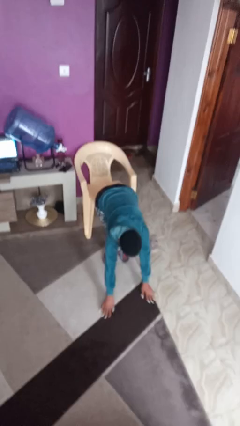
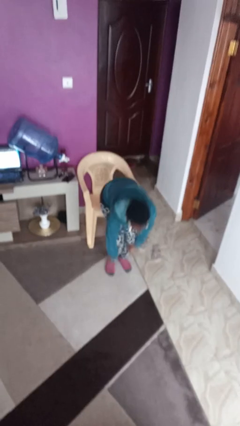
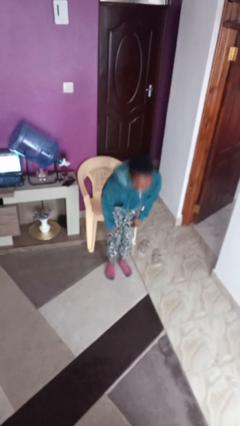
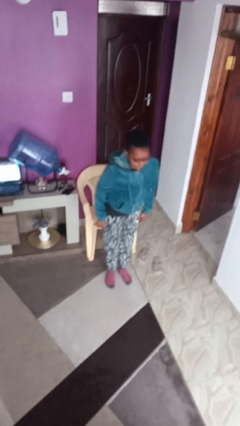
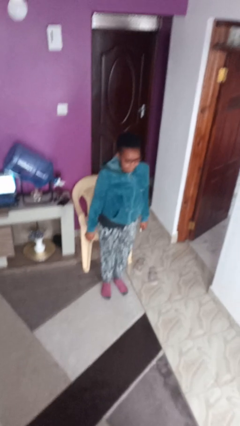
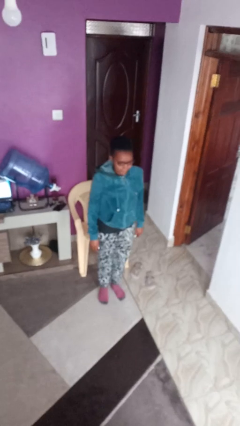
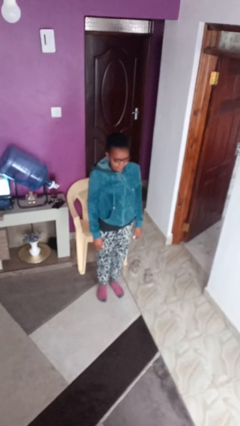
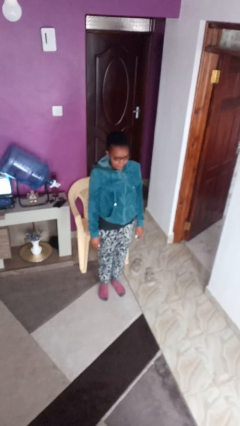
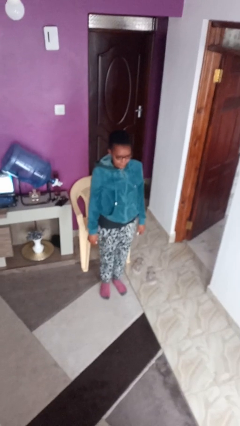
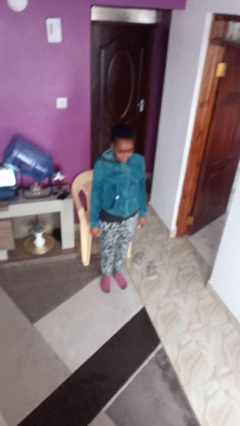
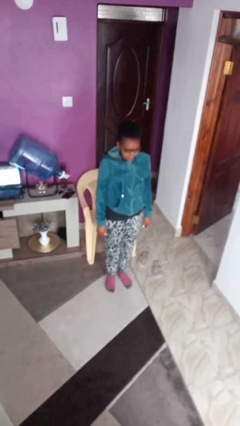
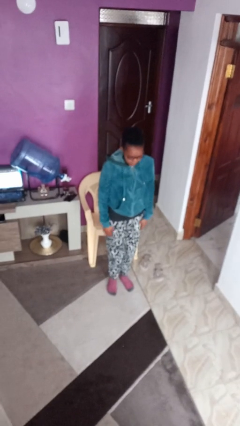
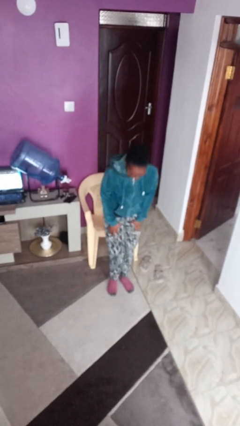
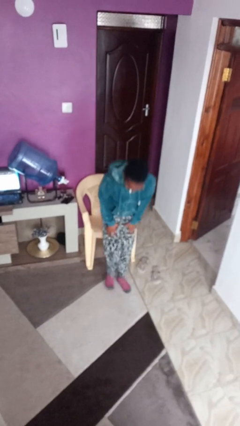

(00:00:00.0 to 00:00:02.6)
person stands up from floor

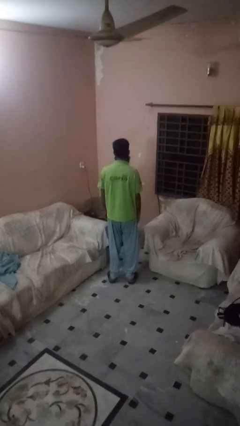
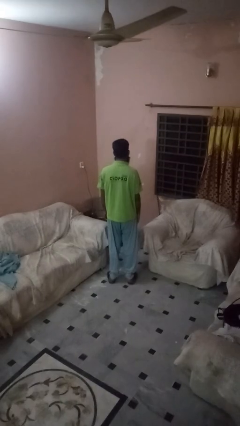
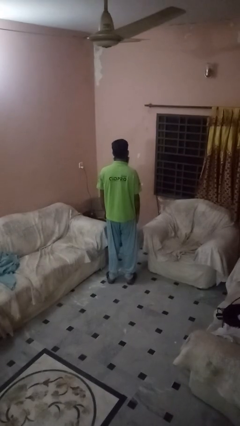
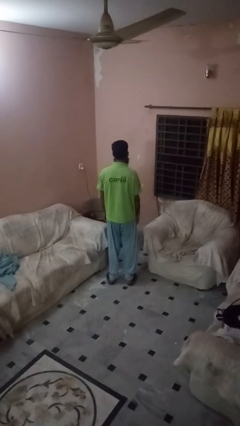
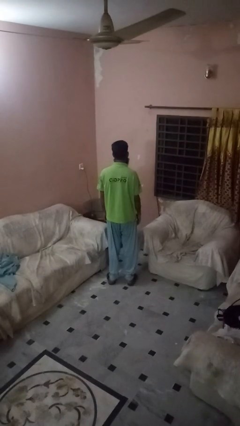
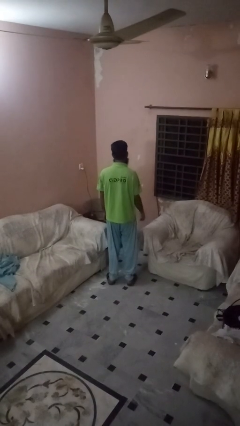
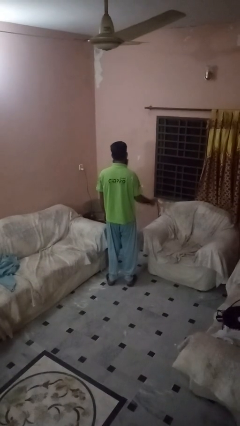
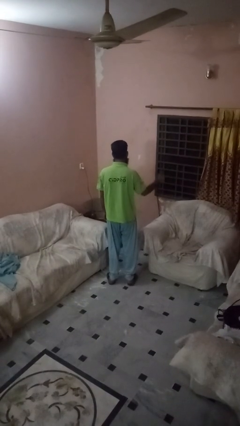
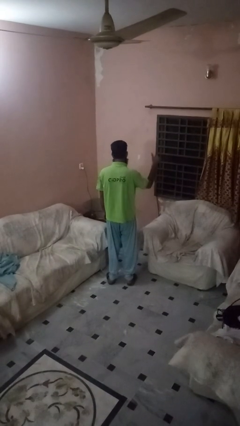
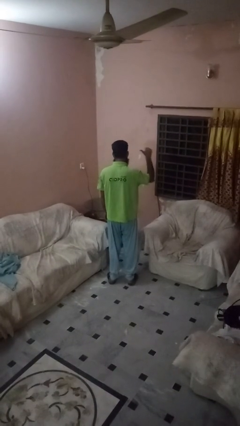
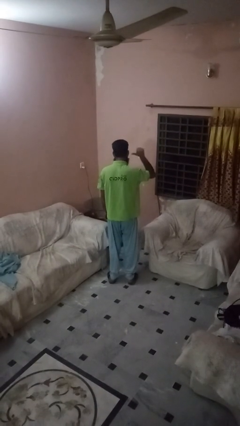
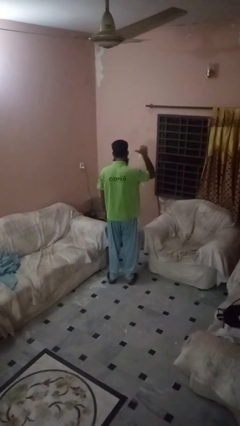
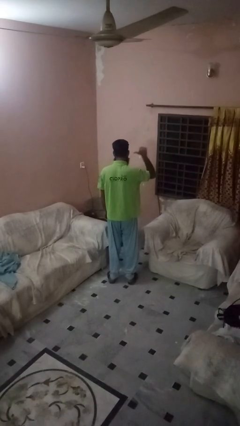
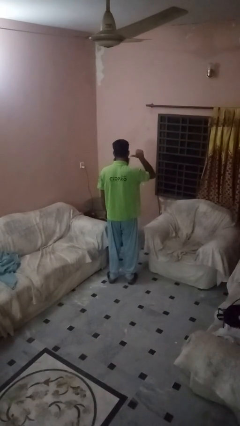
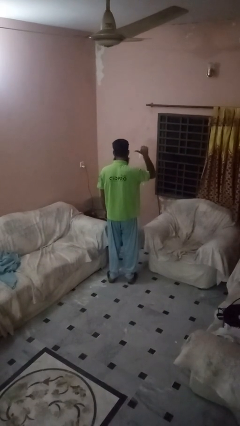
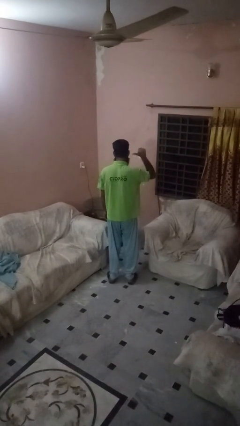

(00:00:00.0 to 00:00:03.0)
person gestures behind me

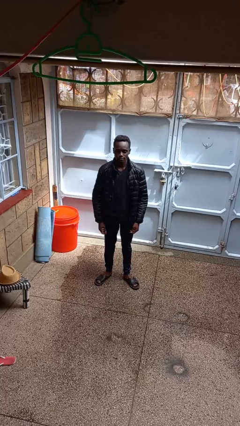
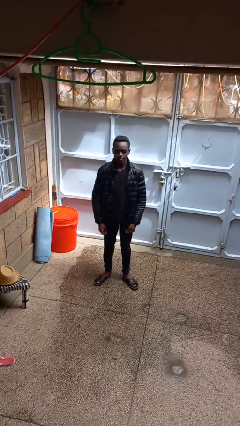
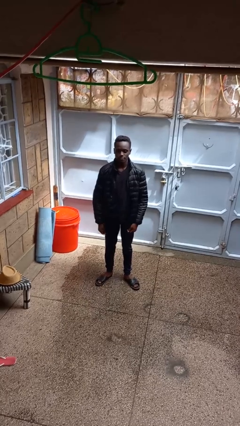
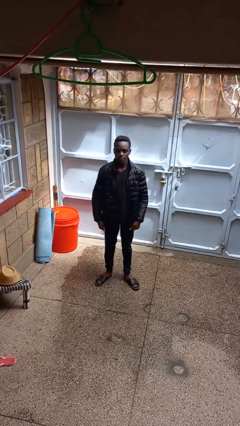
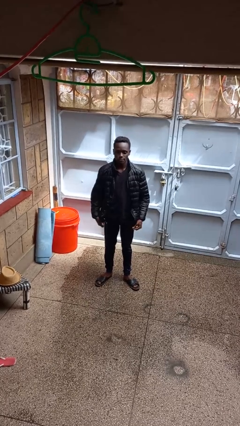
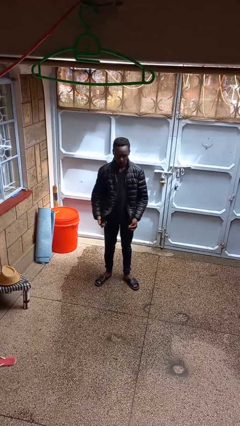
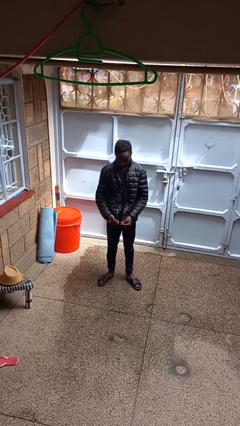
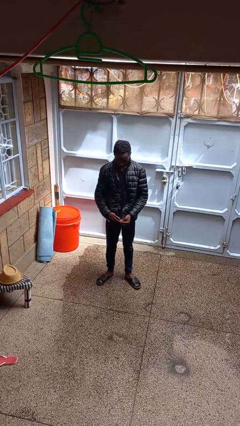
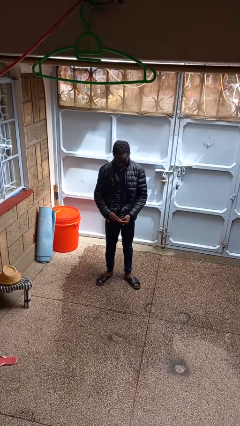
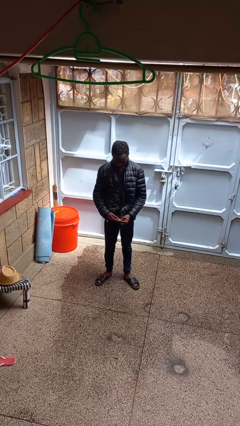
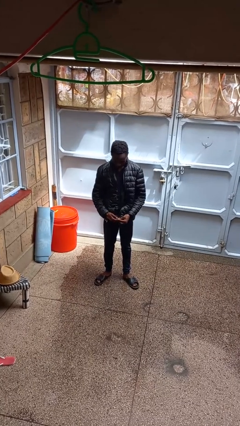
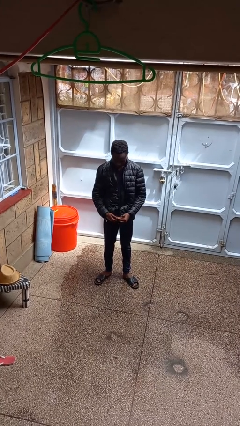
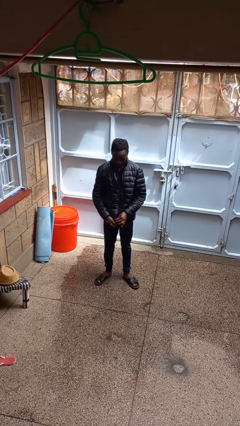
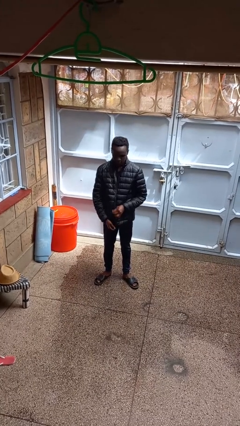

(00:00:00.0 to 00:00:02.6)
person zips up jacket

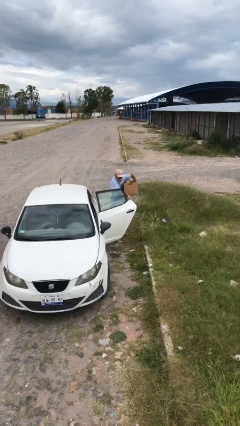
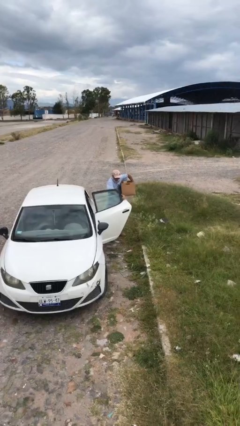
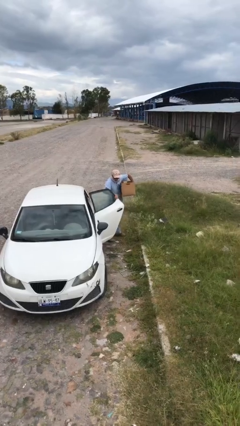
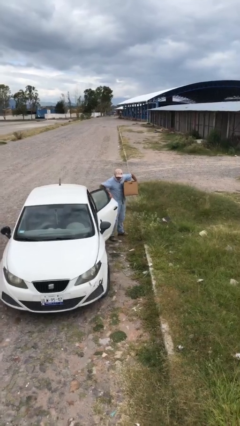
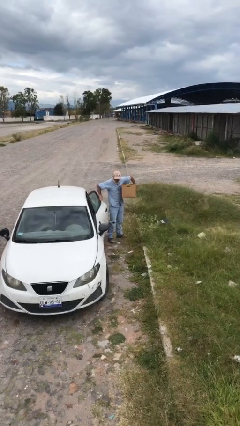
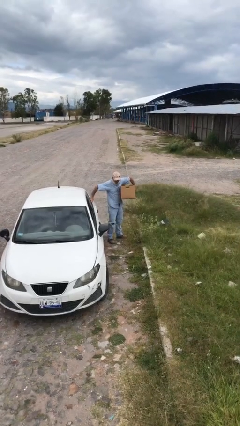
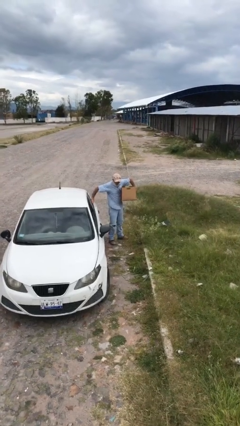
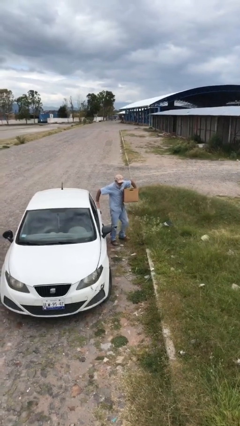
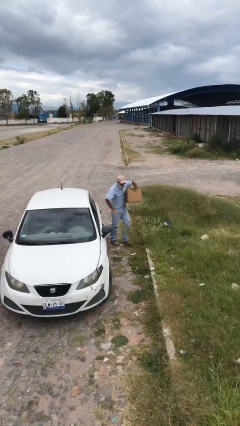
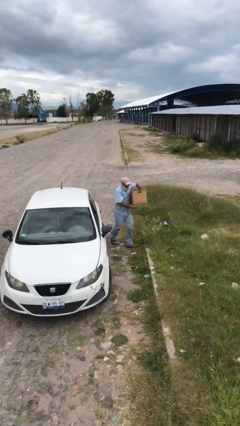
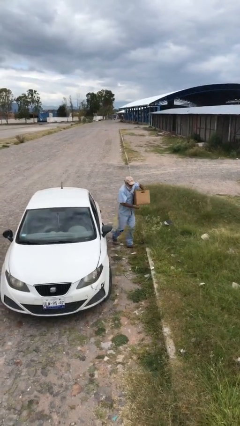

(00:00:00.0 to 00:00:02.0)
person closes car door

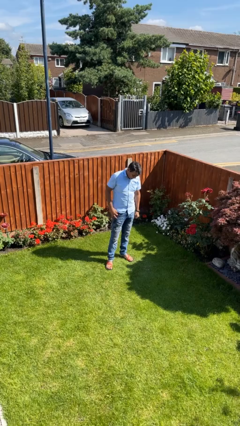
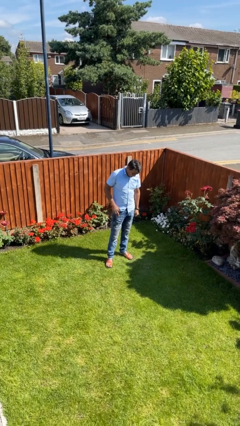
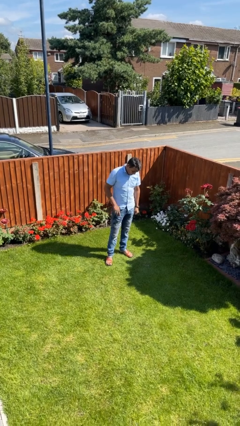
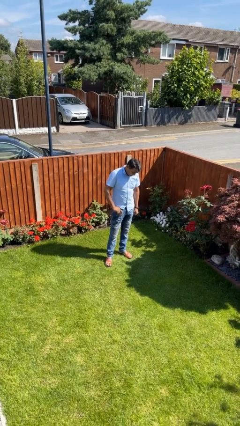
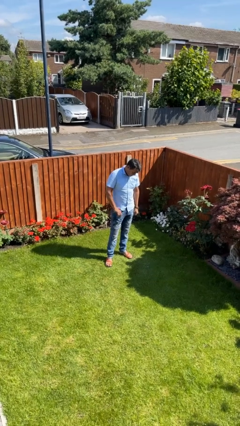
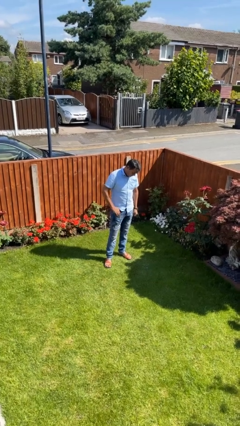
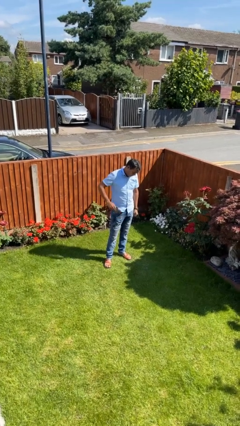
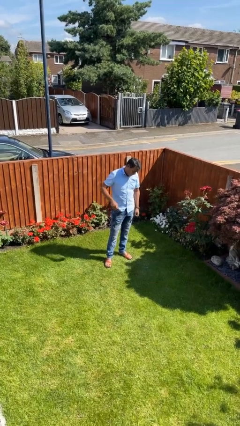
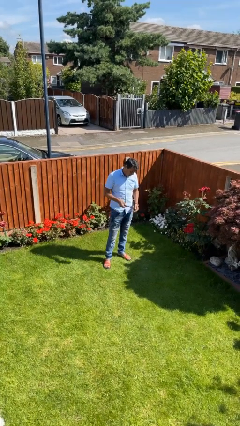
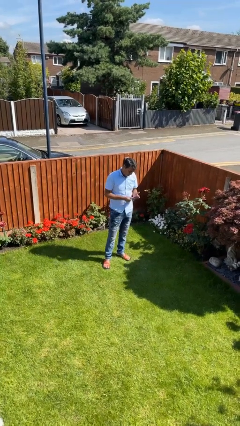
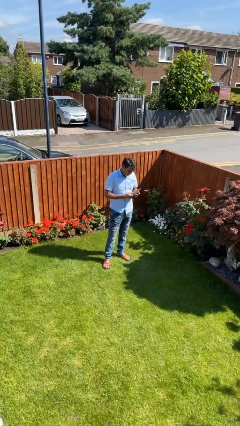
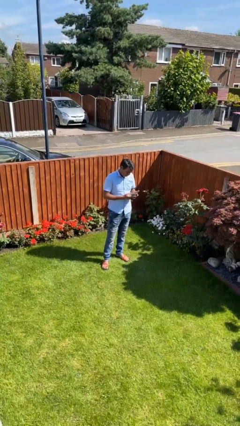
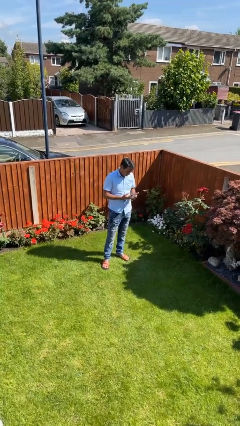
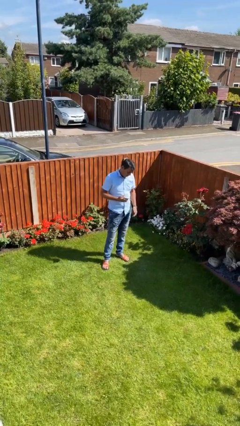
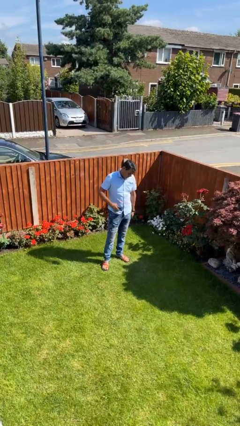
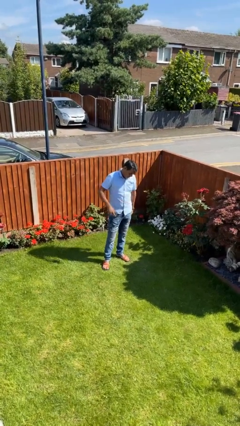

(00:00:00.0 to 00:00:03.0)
person takes phone from pocket

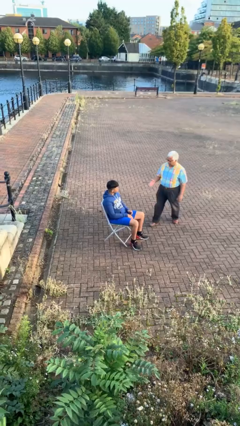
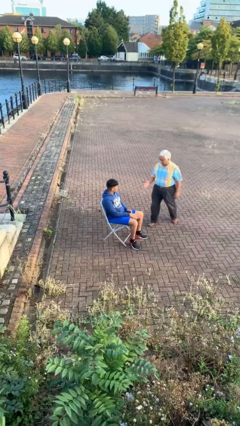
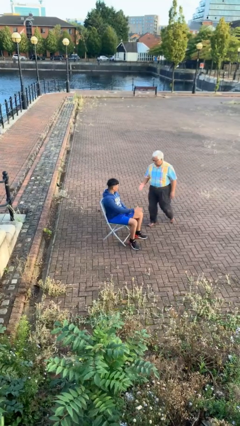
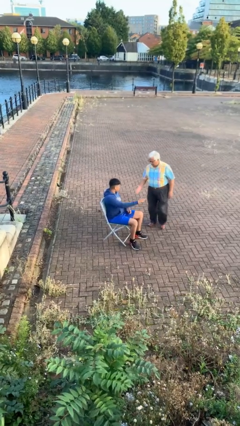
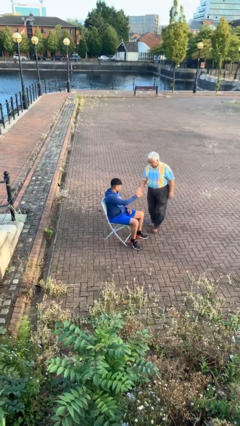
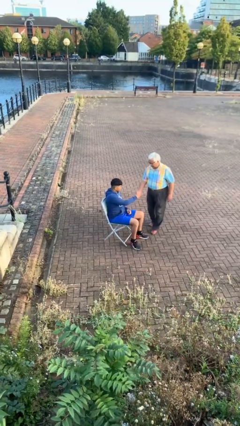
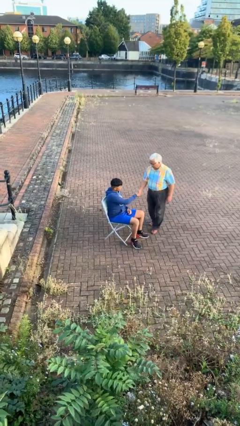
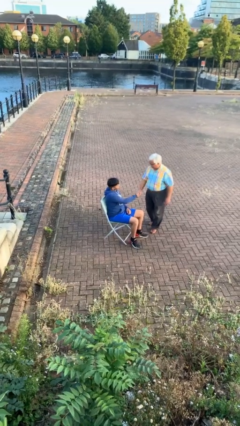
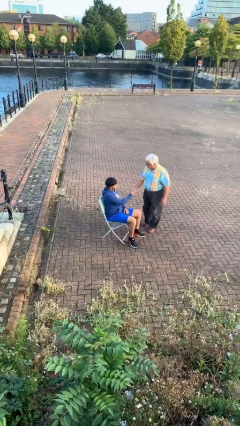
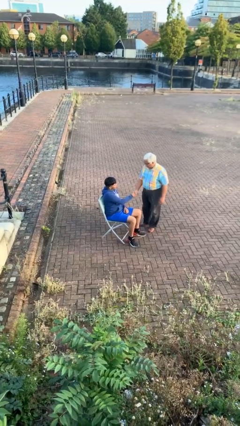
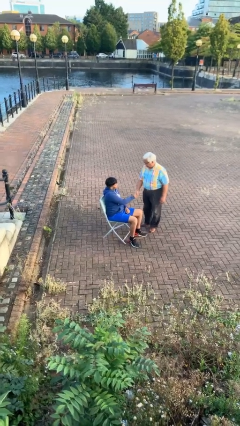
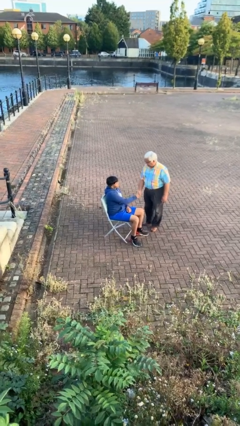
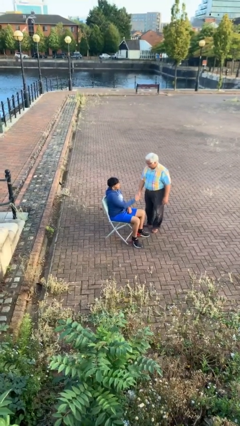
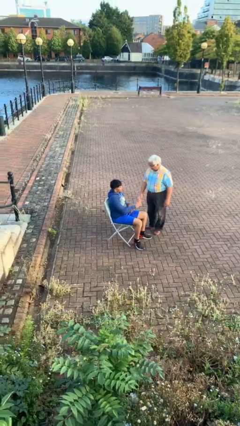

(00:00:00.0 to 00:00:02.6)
person shakes hand

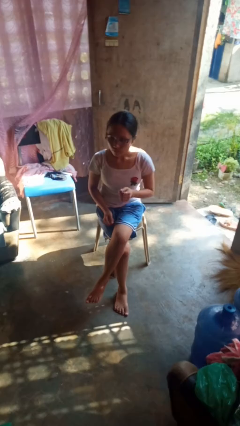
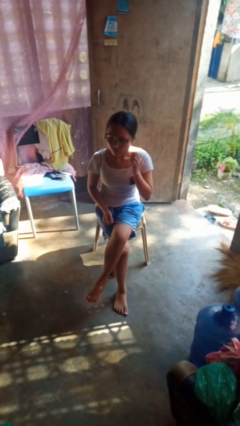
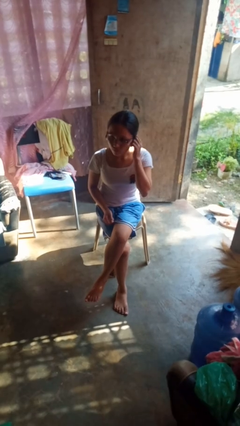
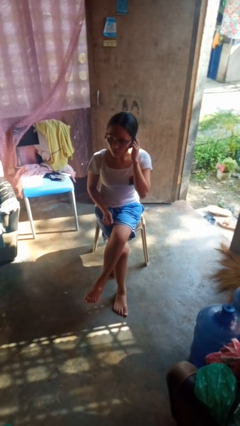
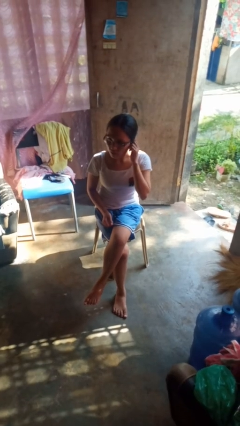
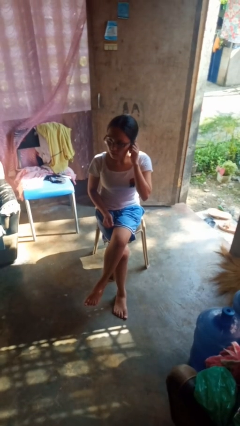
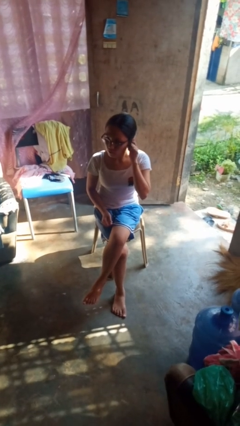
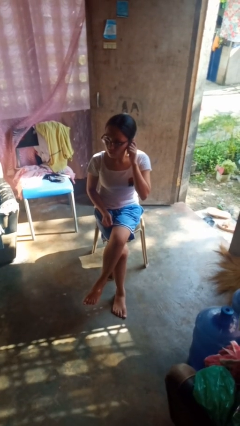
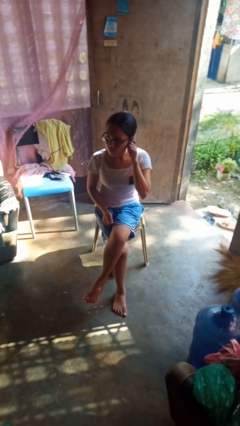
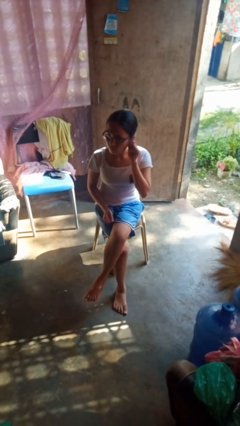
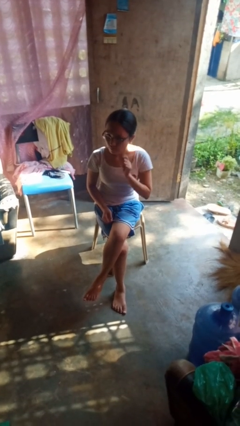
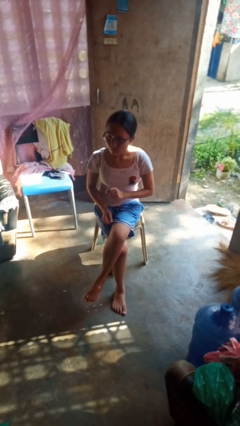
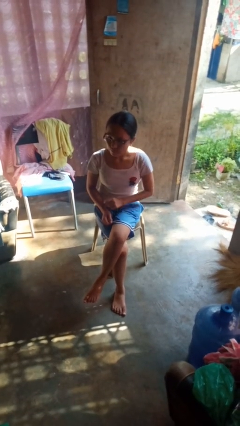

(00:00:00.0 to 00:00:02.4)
person touches earlobe
